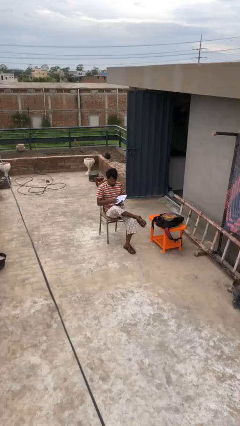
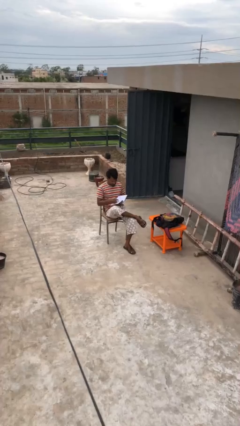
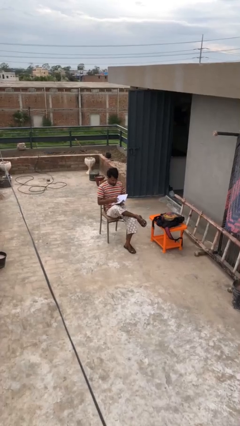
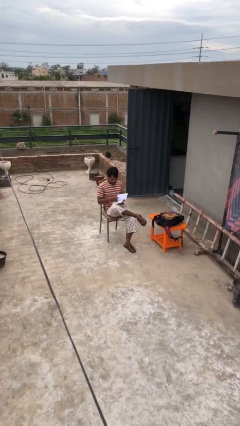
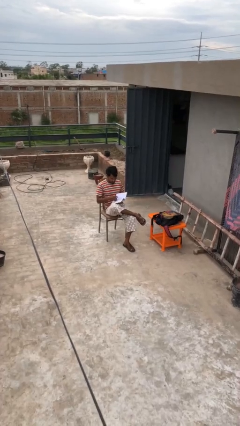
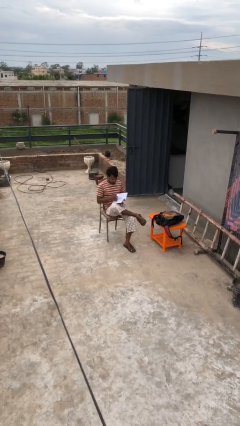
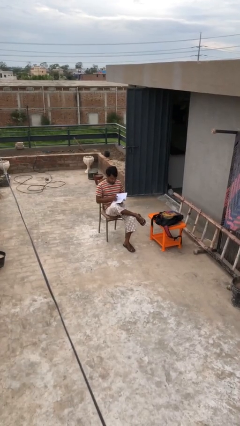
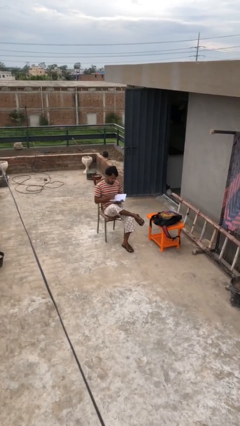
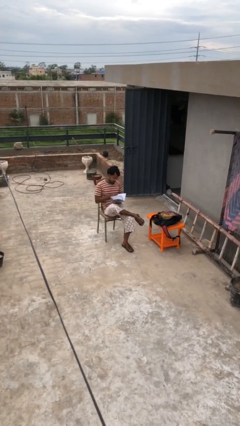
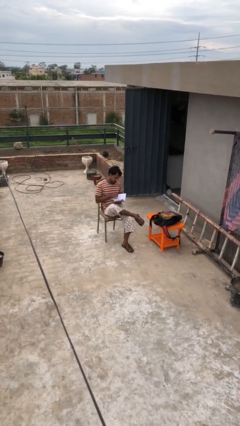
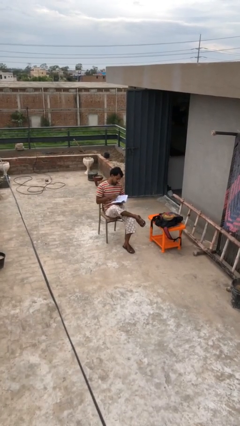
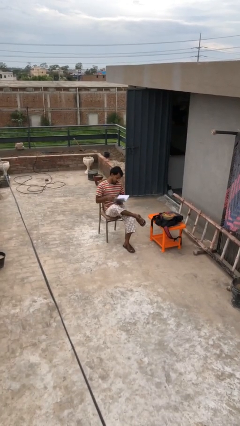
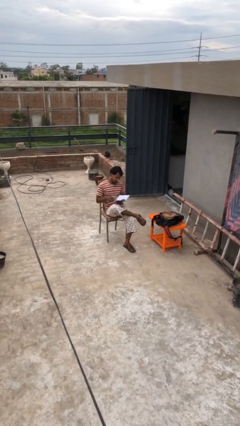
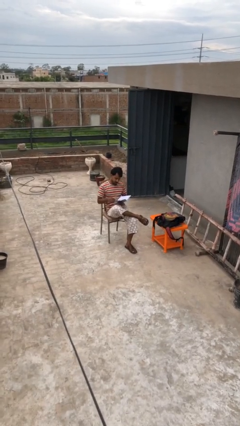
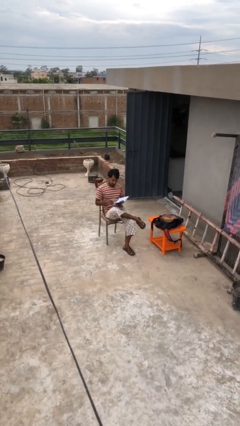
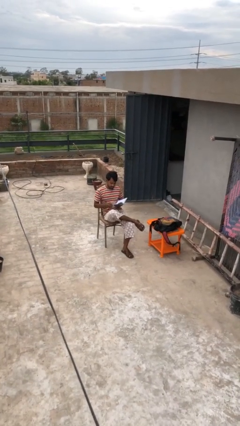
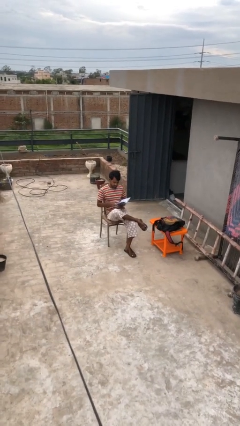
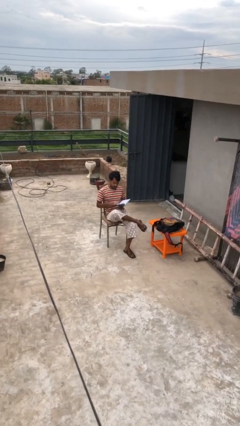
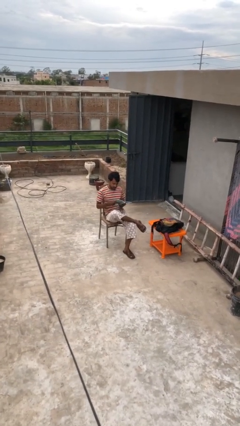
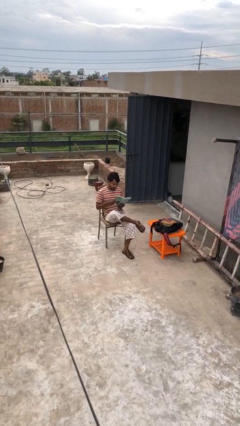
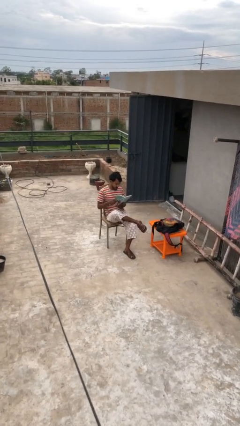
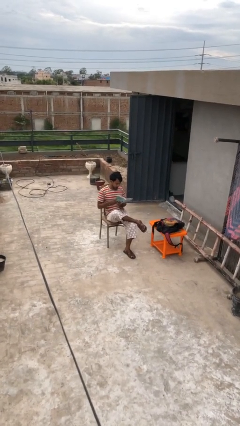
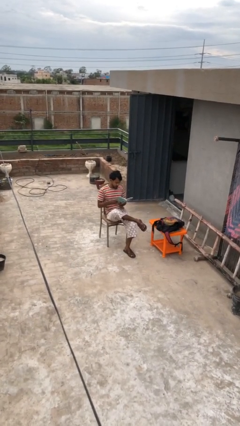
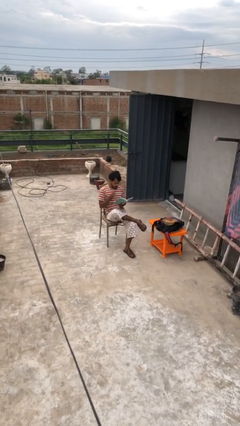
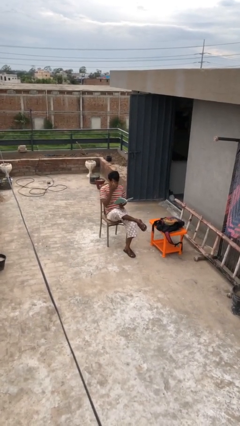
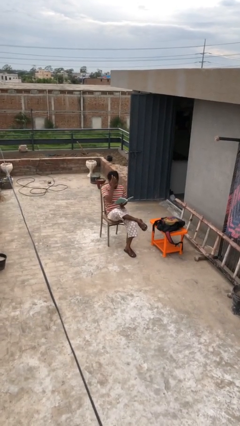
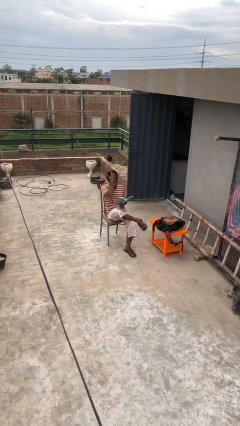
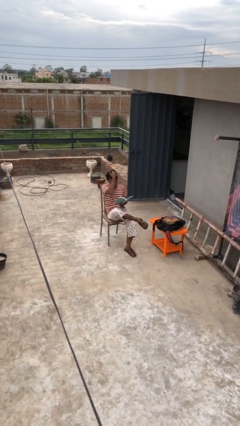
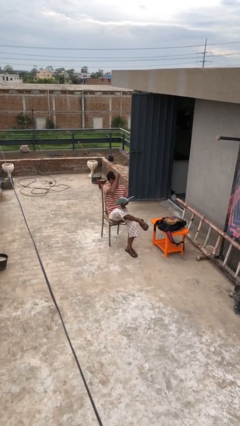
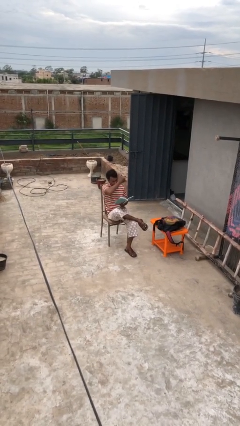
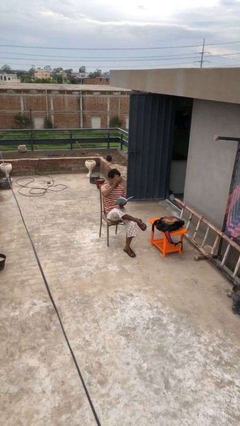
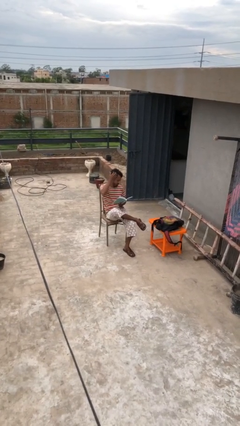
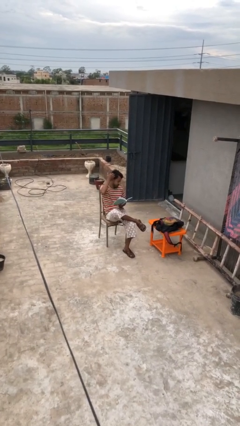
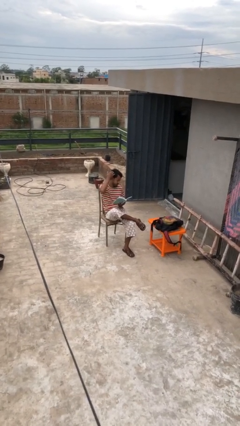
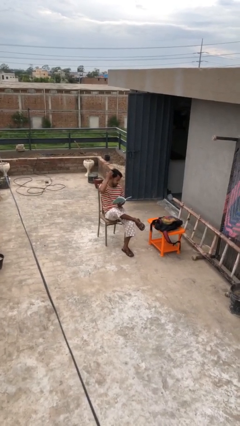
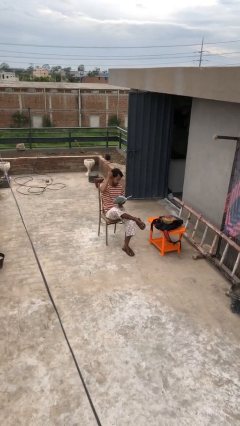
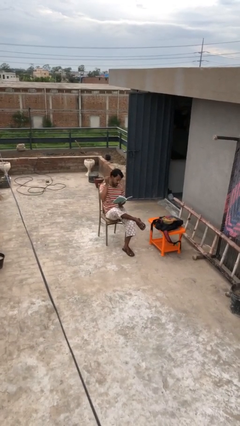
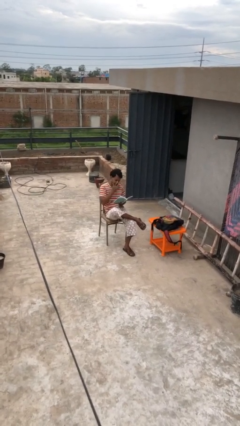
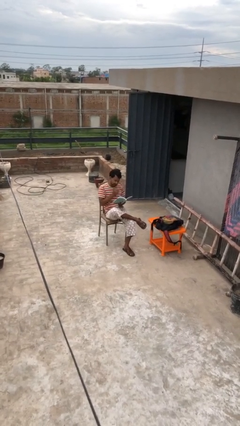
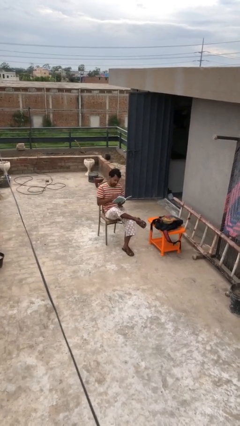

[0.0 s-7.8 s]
person reads document

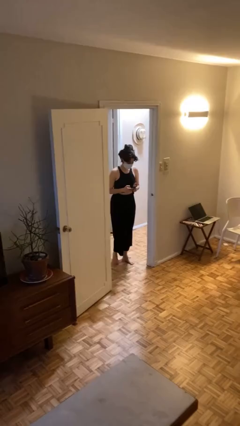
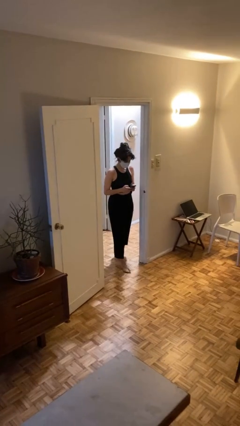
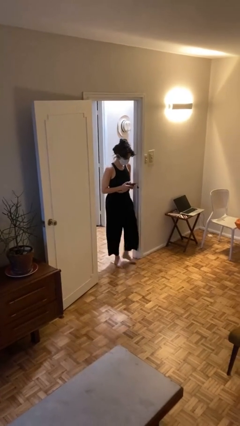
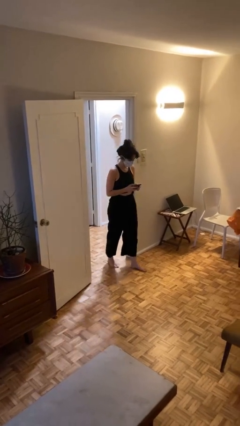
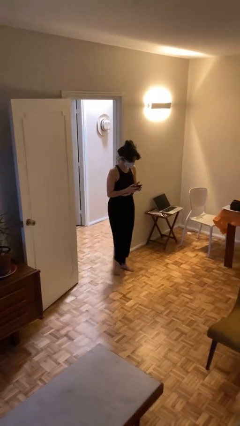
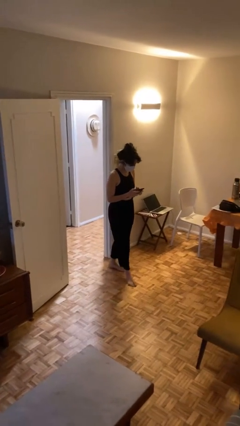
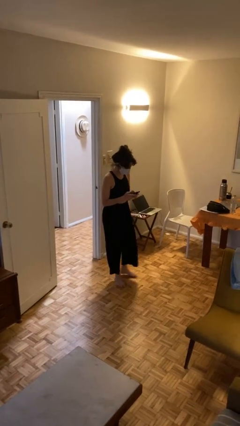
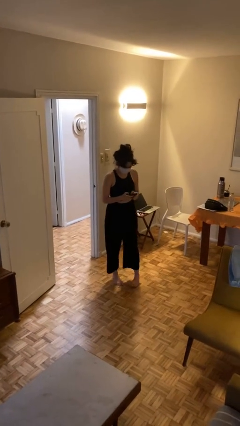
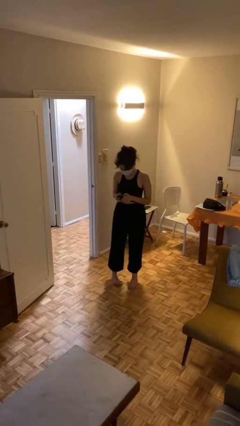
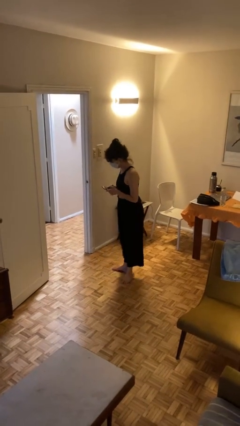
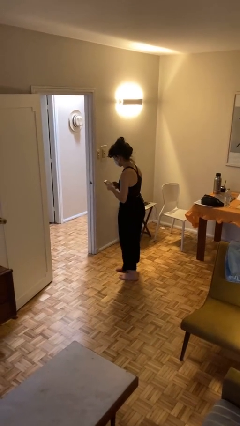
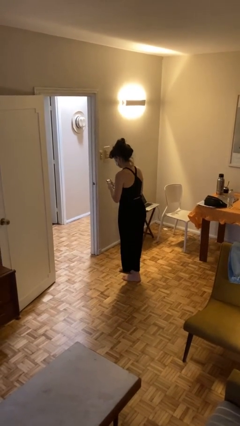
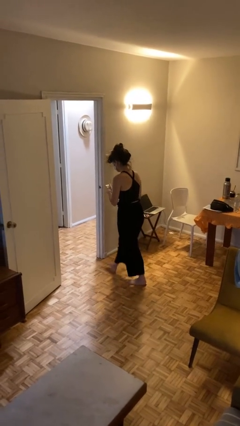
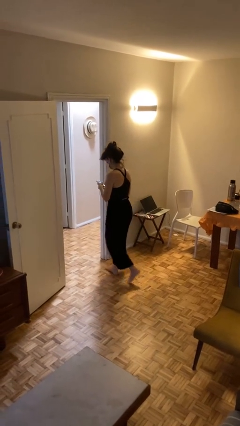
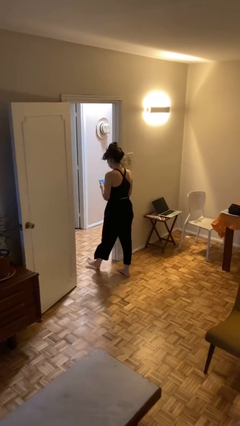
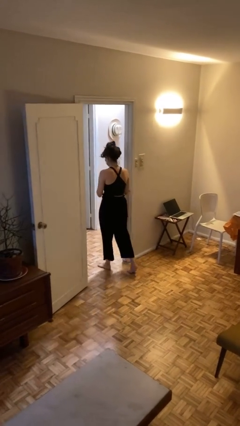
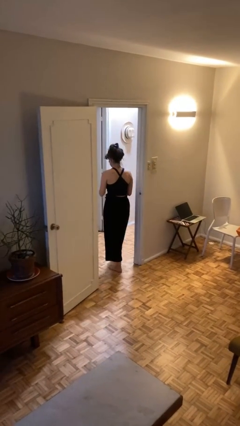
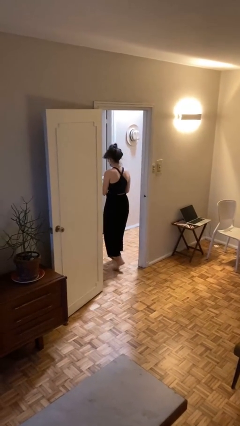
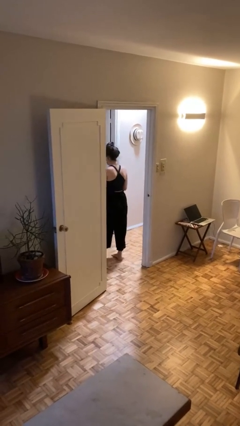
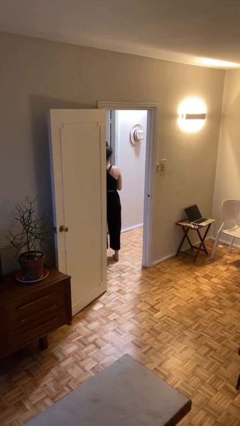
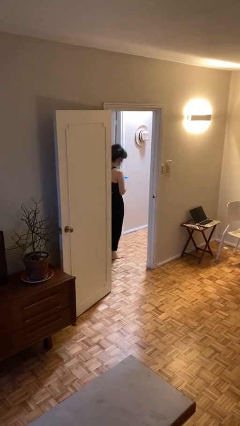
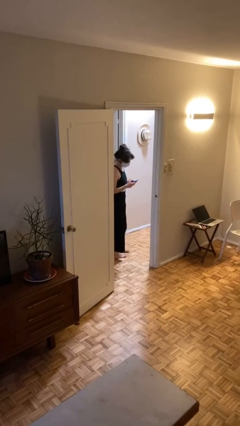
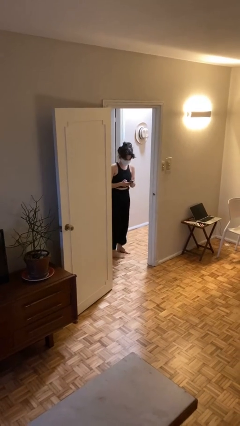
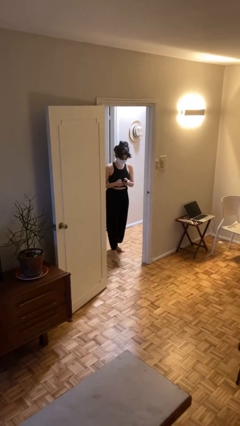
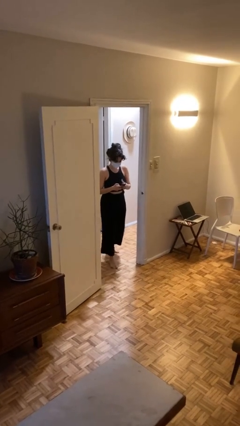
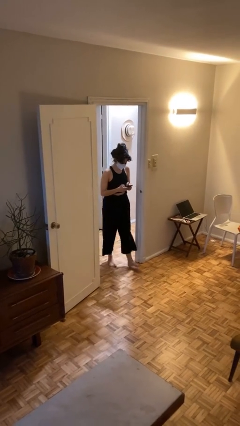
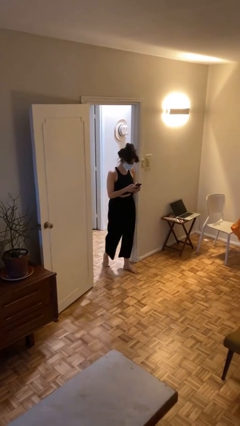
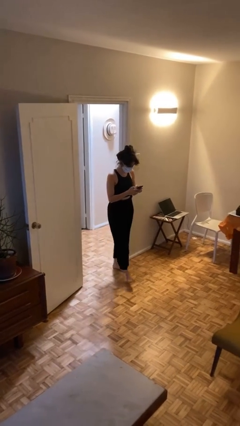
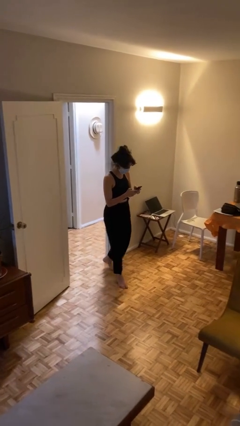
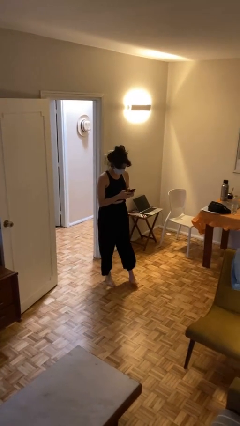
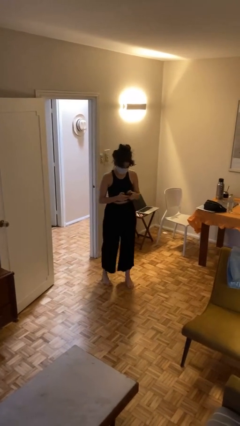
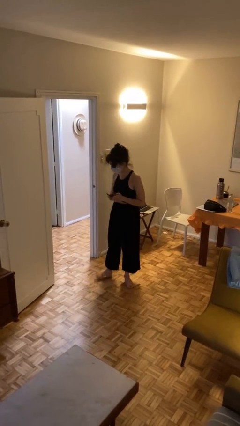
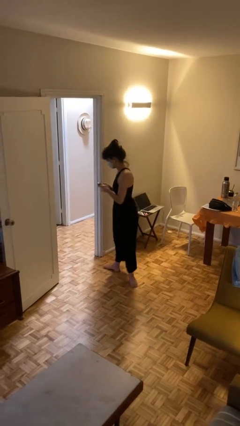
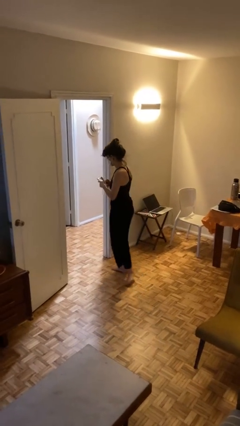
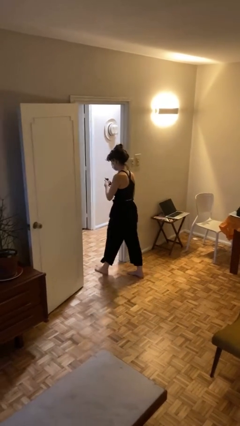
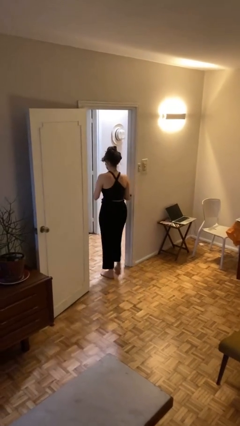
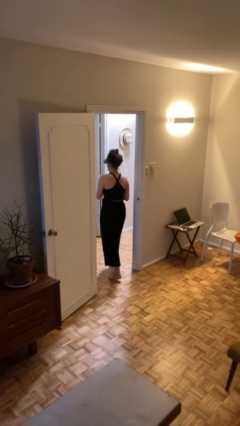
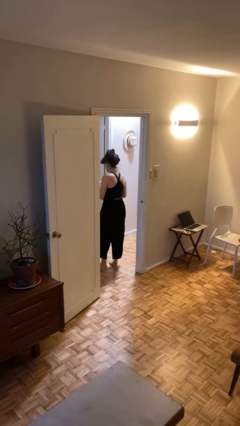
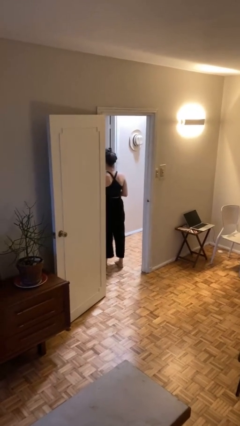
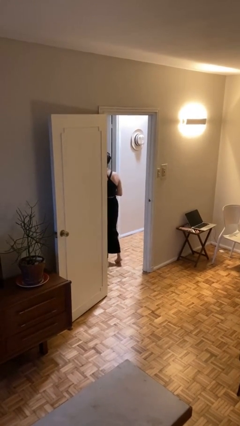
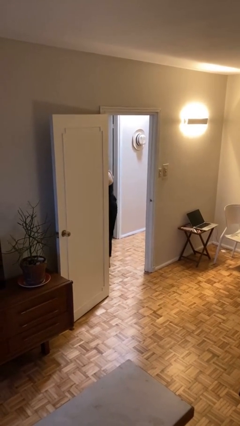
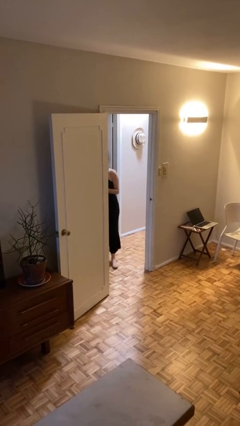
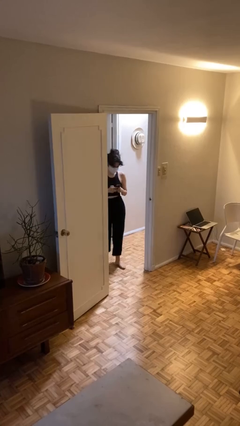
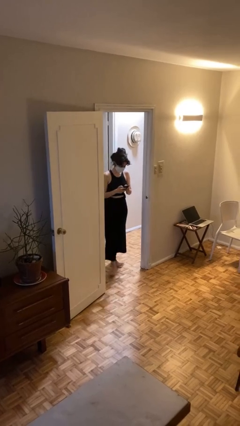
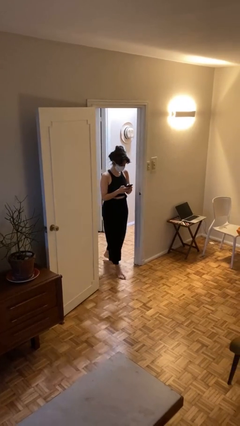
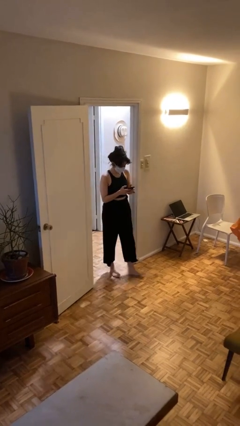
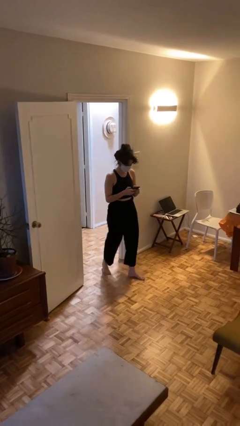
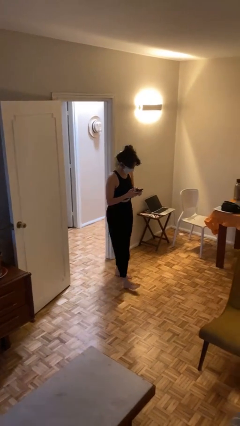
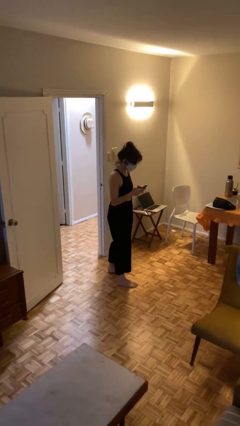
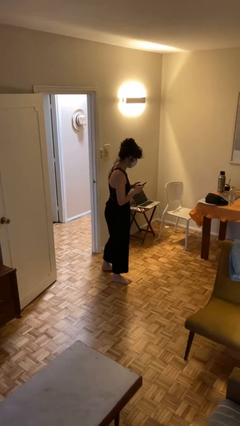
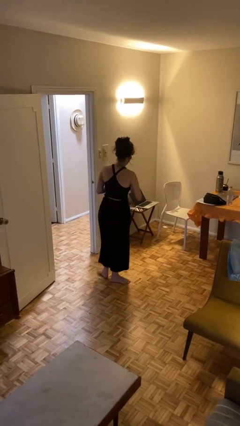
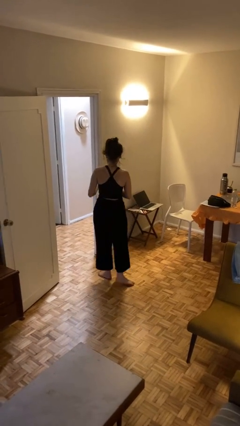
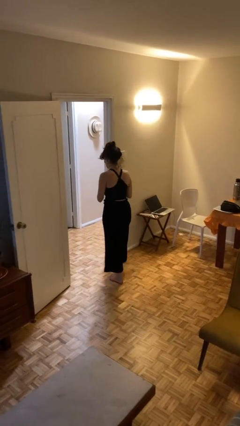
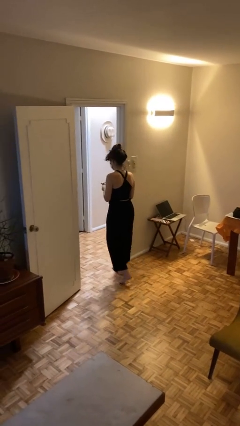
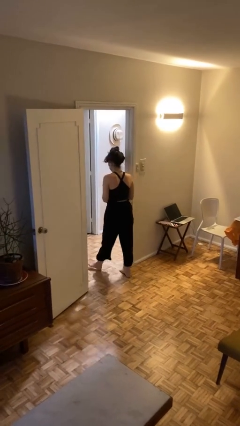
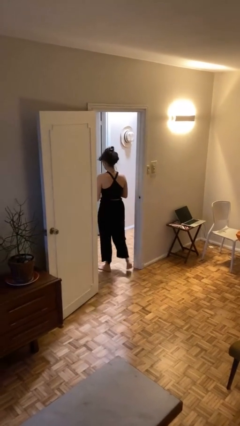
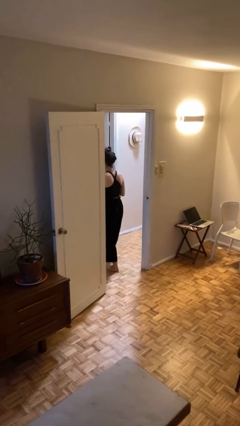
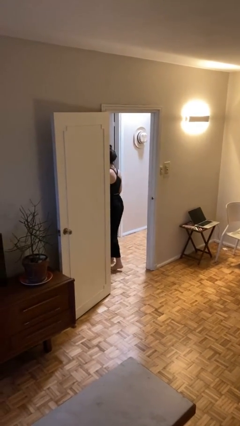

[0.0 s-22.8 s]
person texts on phone
